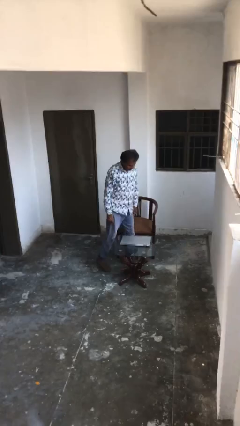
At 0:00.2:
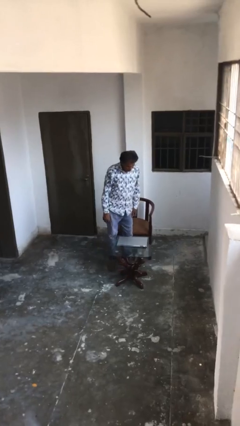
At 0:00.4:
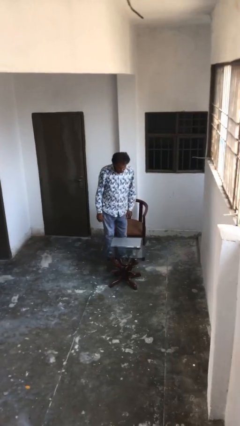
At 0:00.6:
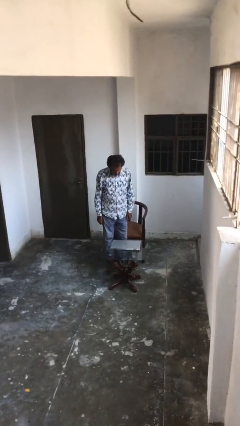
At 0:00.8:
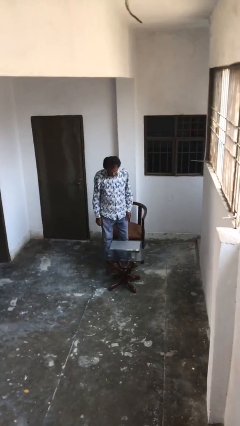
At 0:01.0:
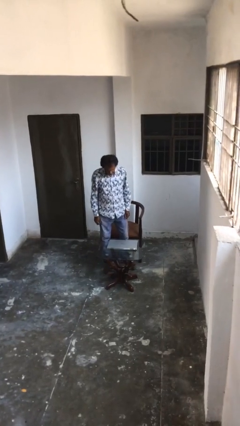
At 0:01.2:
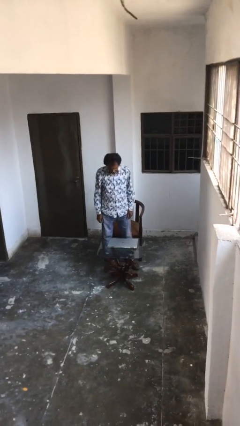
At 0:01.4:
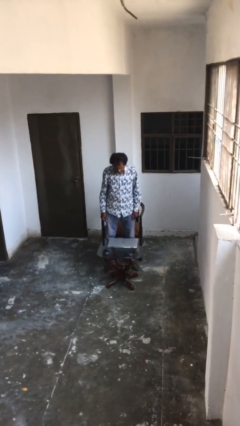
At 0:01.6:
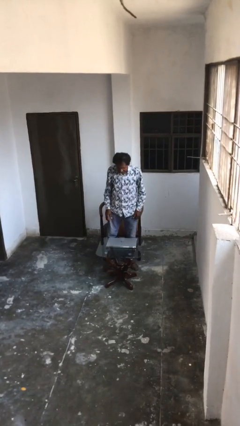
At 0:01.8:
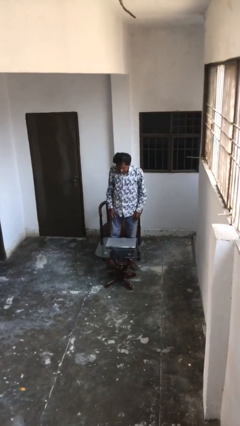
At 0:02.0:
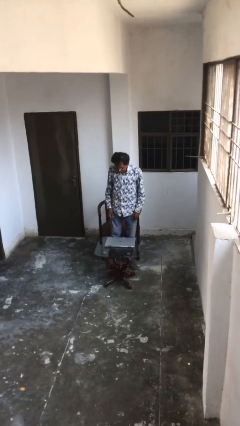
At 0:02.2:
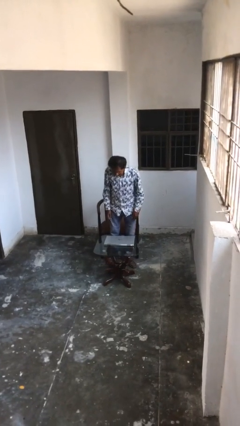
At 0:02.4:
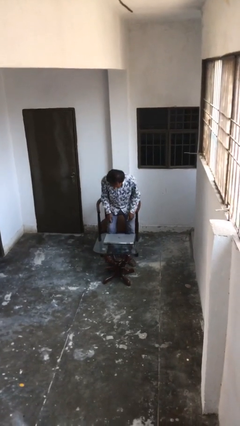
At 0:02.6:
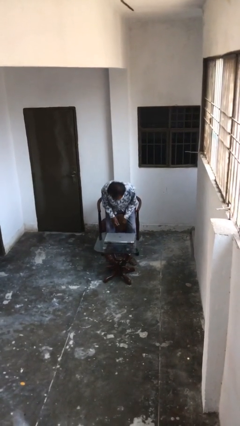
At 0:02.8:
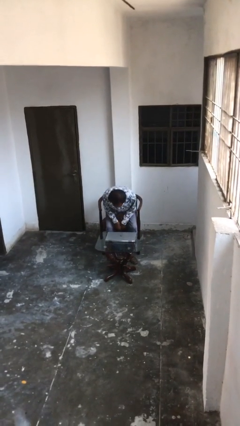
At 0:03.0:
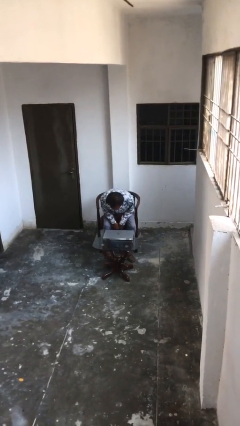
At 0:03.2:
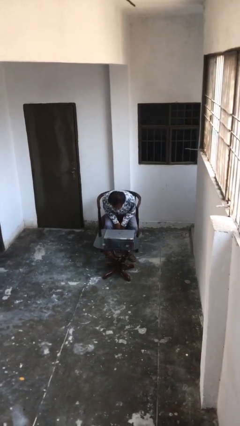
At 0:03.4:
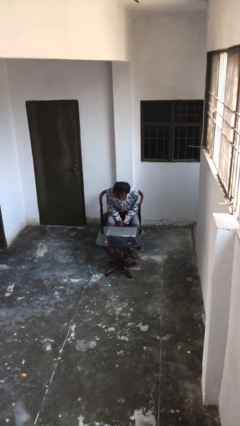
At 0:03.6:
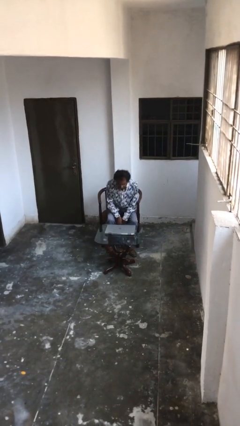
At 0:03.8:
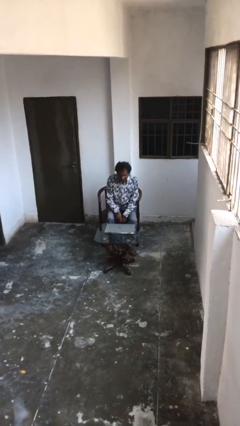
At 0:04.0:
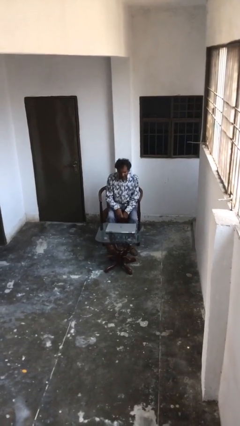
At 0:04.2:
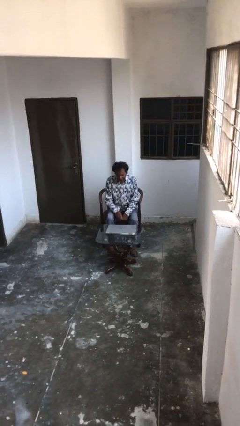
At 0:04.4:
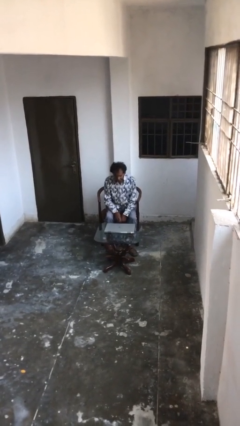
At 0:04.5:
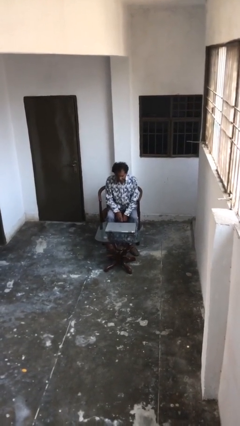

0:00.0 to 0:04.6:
person sits down

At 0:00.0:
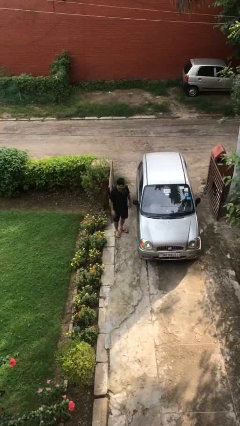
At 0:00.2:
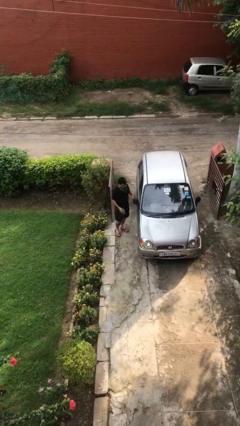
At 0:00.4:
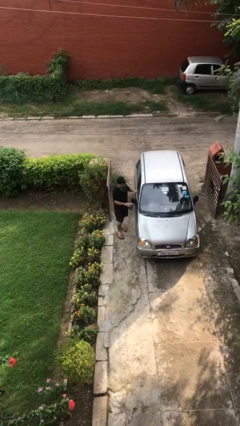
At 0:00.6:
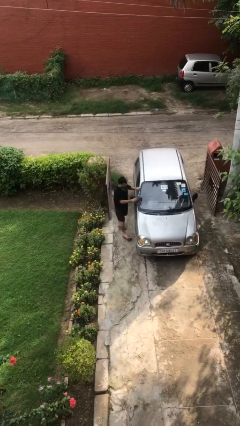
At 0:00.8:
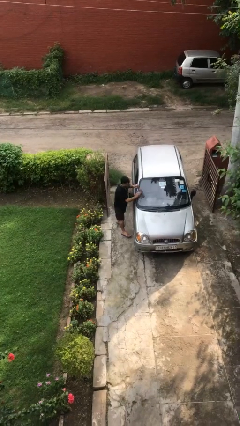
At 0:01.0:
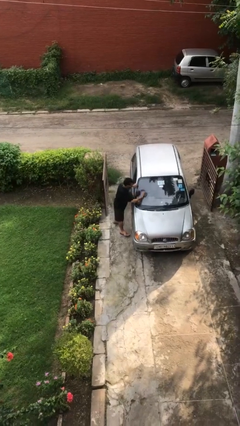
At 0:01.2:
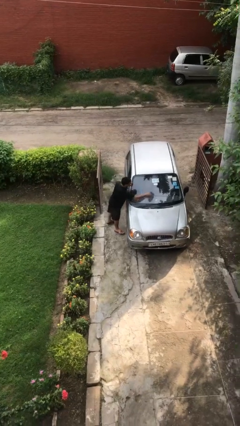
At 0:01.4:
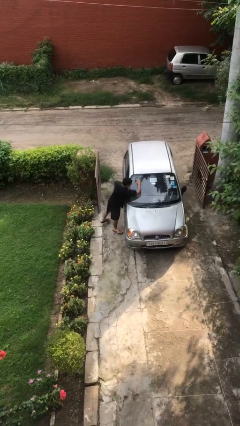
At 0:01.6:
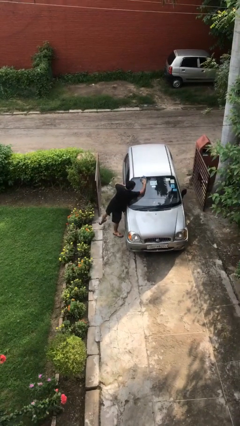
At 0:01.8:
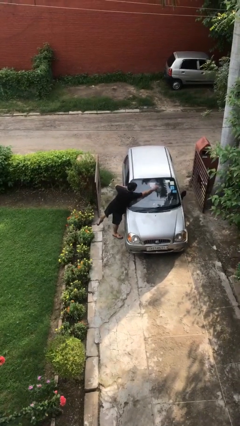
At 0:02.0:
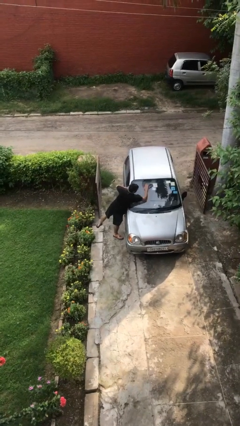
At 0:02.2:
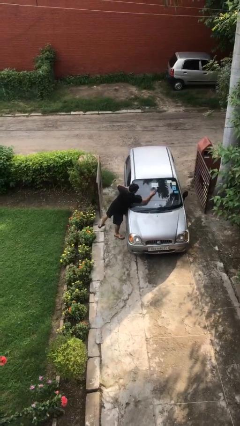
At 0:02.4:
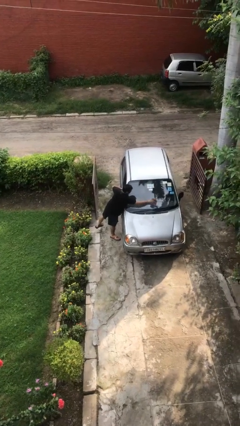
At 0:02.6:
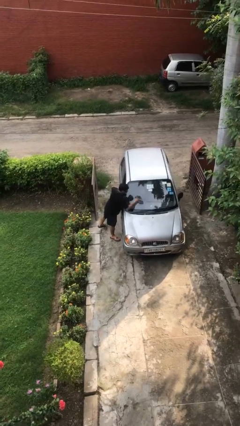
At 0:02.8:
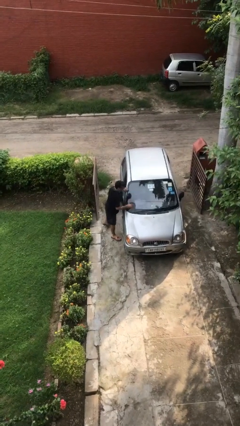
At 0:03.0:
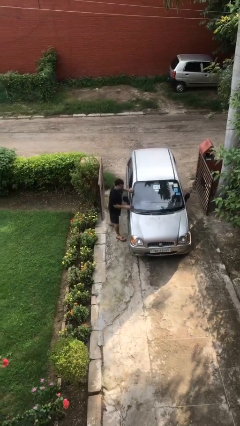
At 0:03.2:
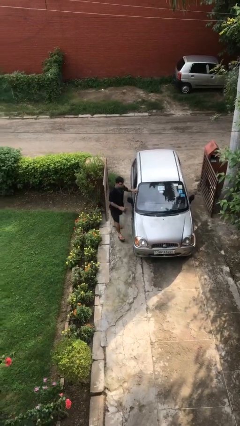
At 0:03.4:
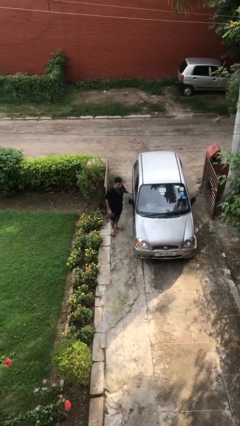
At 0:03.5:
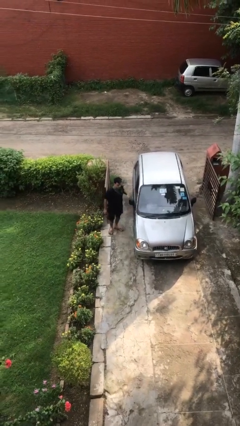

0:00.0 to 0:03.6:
person polishes car with rag

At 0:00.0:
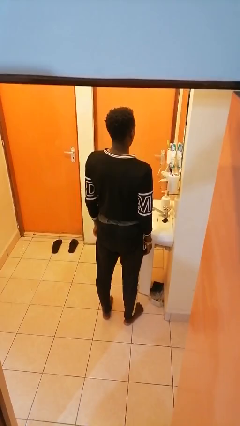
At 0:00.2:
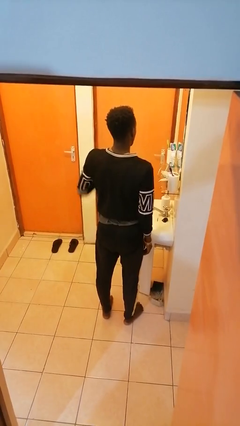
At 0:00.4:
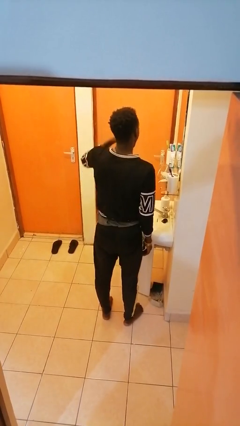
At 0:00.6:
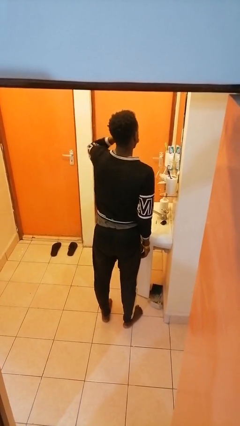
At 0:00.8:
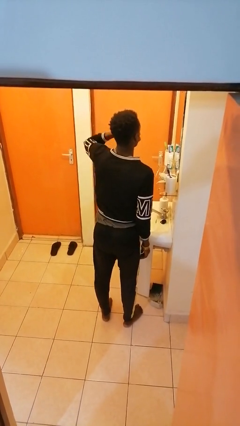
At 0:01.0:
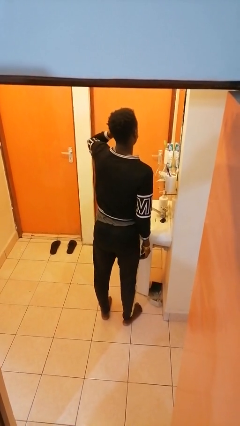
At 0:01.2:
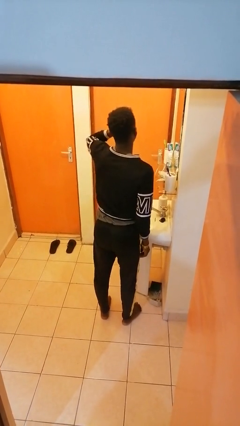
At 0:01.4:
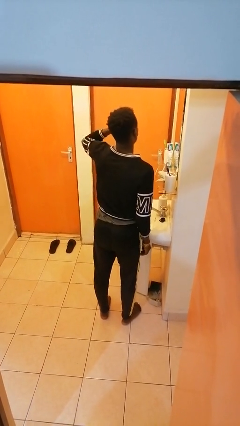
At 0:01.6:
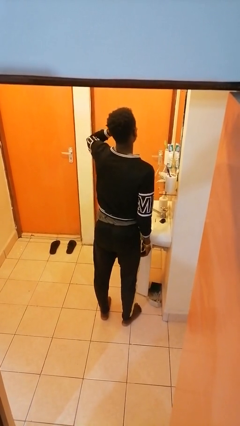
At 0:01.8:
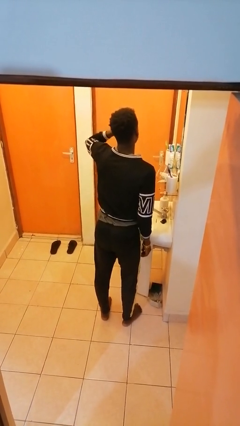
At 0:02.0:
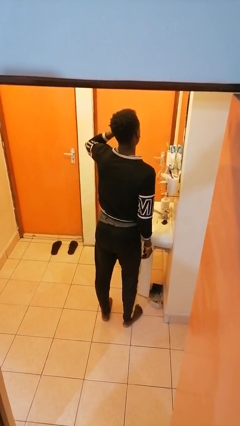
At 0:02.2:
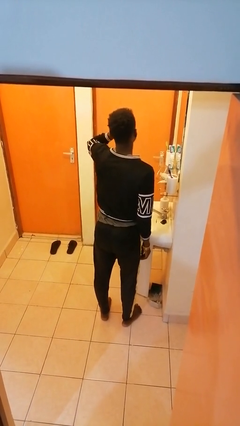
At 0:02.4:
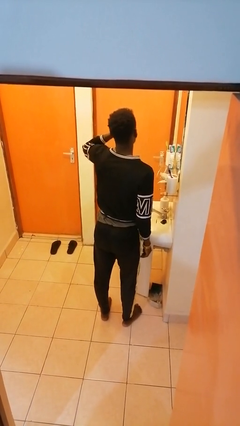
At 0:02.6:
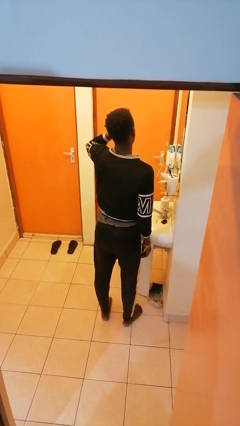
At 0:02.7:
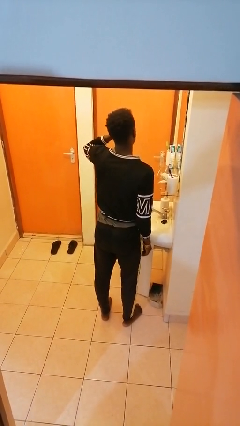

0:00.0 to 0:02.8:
person brushes teeth

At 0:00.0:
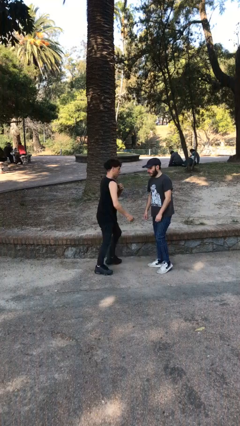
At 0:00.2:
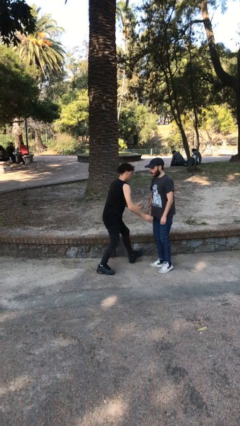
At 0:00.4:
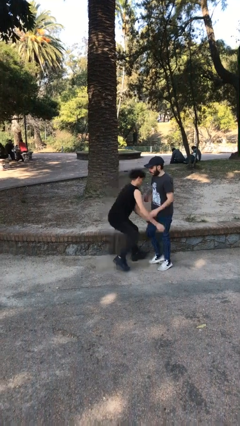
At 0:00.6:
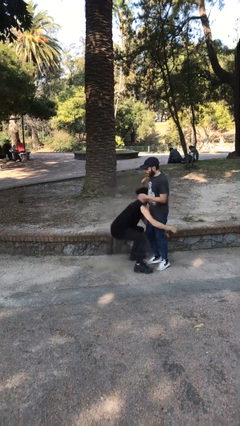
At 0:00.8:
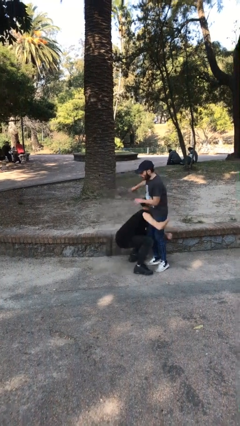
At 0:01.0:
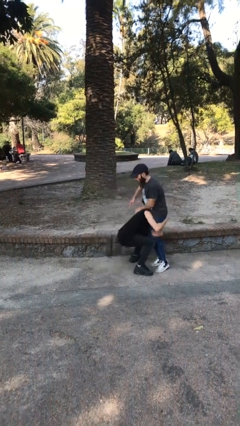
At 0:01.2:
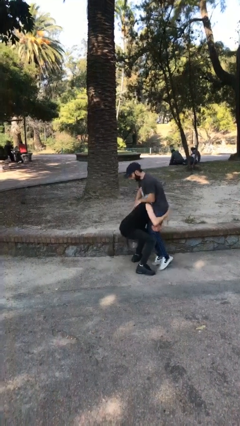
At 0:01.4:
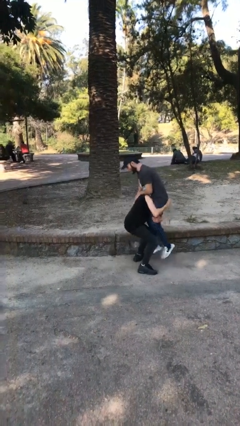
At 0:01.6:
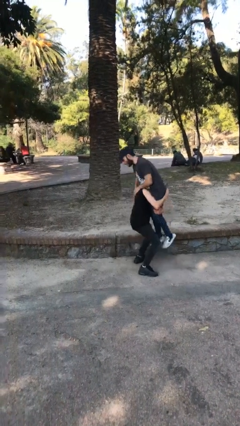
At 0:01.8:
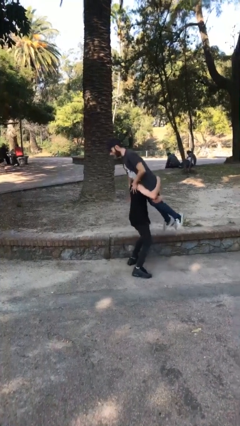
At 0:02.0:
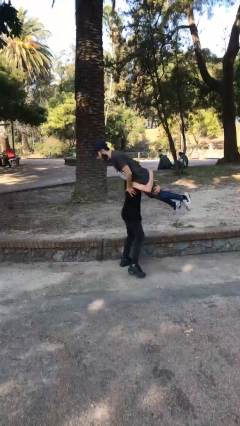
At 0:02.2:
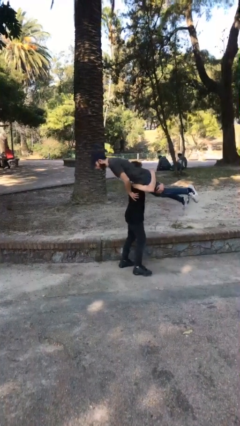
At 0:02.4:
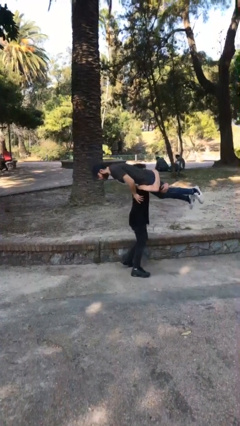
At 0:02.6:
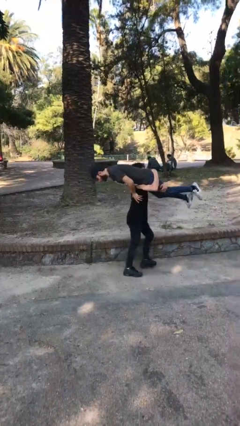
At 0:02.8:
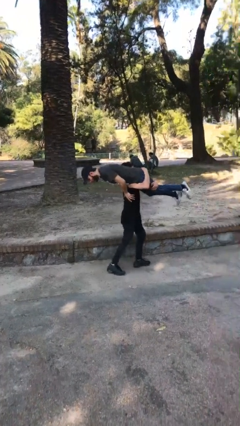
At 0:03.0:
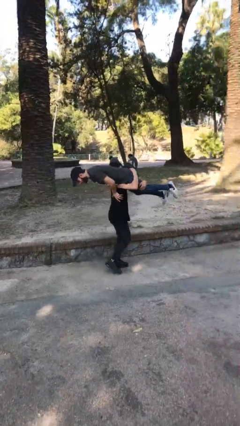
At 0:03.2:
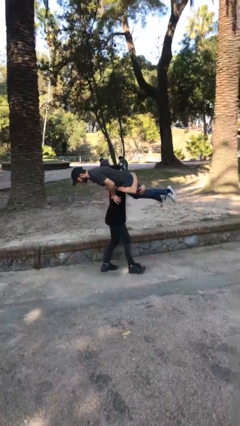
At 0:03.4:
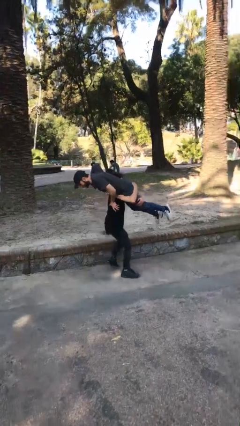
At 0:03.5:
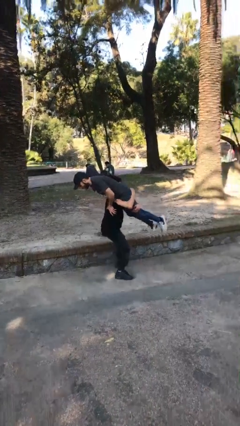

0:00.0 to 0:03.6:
person carries person over shoulder

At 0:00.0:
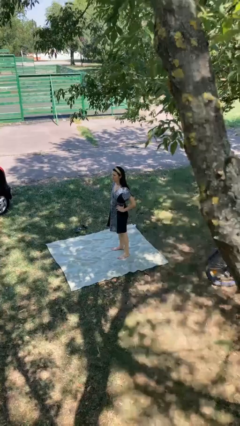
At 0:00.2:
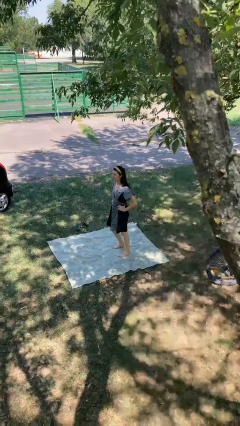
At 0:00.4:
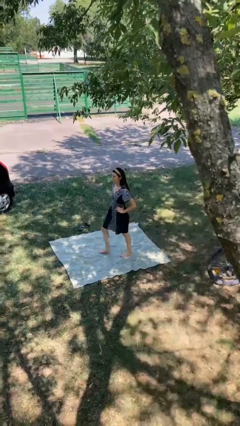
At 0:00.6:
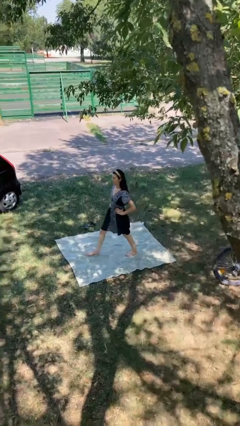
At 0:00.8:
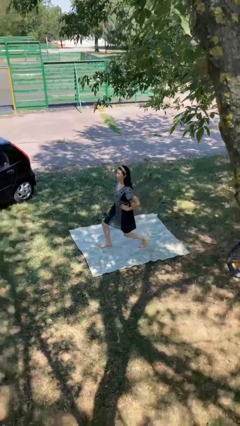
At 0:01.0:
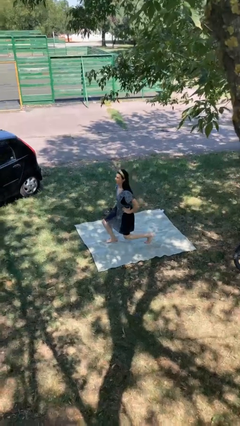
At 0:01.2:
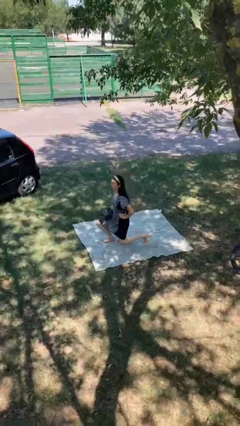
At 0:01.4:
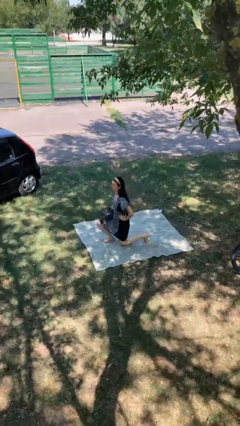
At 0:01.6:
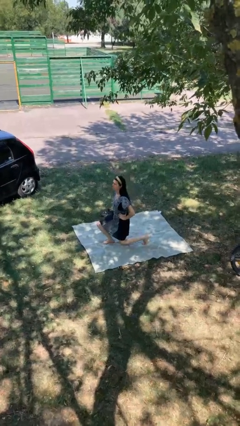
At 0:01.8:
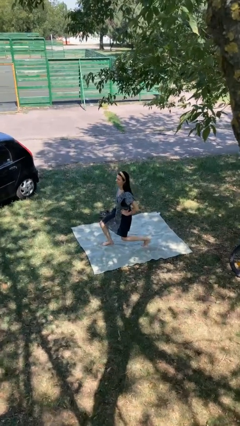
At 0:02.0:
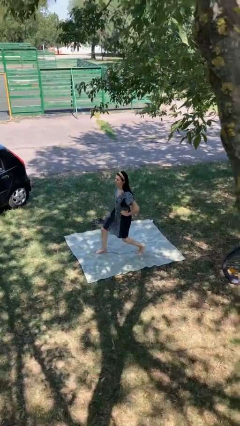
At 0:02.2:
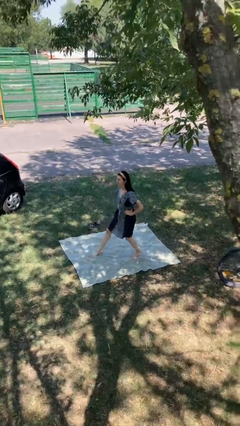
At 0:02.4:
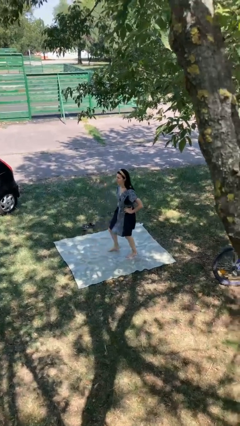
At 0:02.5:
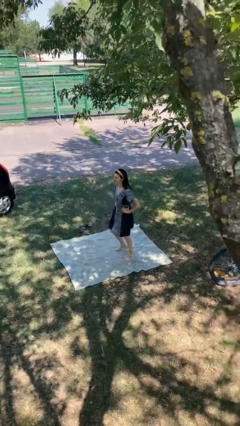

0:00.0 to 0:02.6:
person exercises with lunges

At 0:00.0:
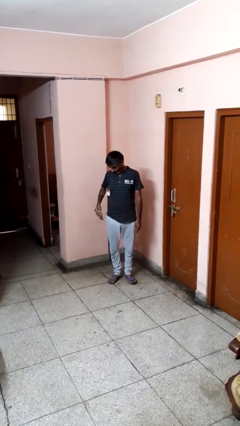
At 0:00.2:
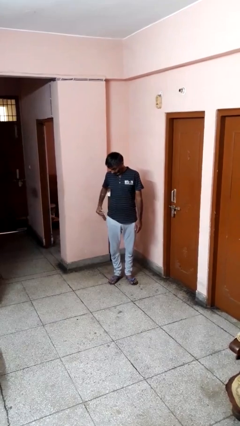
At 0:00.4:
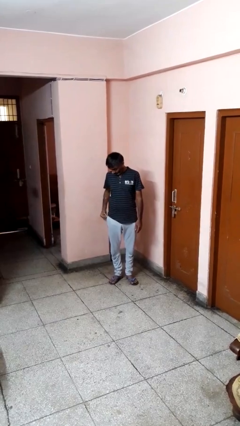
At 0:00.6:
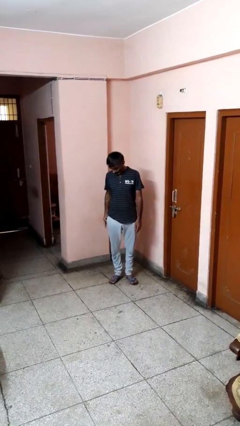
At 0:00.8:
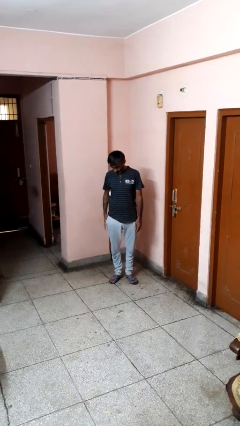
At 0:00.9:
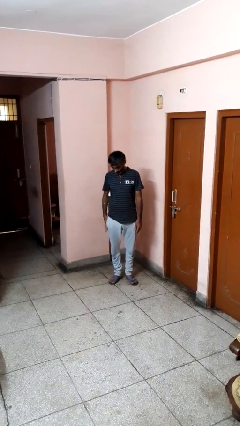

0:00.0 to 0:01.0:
person puts phone into pocket
